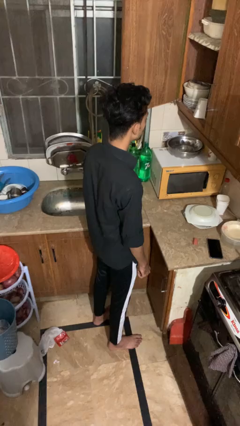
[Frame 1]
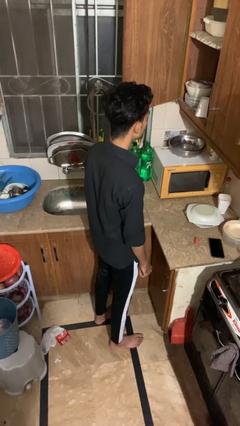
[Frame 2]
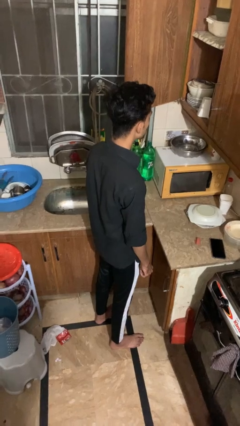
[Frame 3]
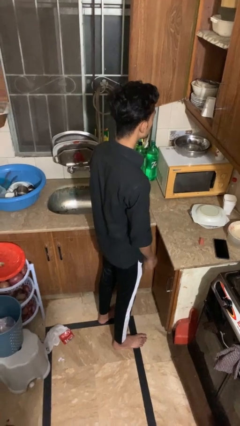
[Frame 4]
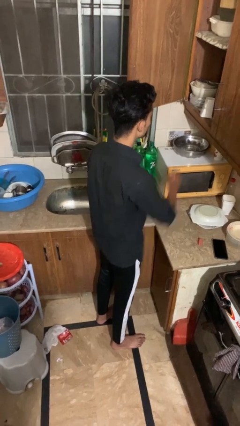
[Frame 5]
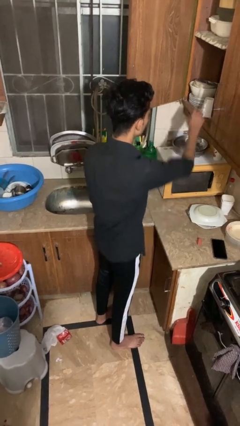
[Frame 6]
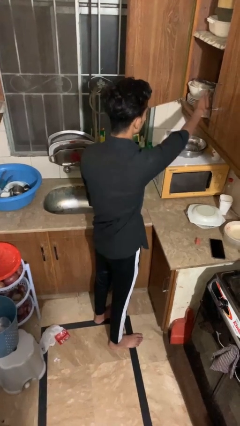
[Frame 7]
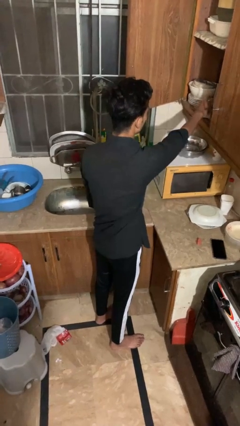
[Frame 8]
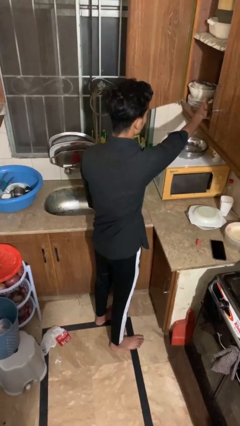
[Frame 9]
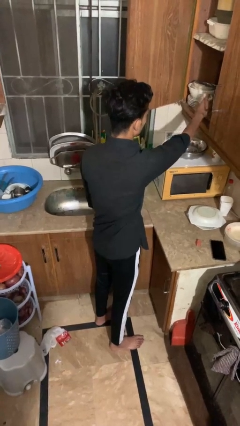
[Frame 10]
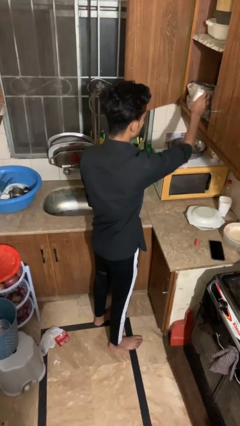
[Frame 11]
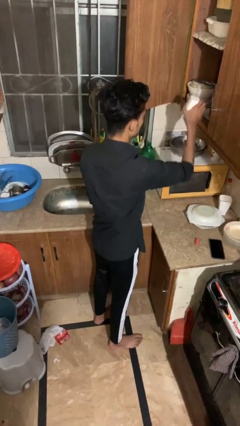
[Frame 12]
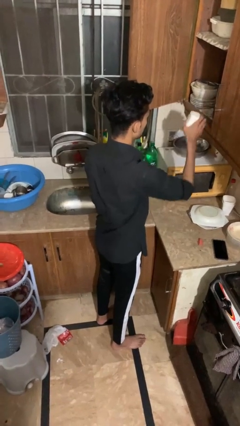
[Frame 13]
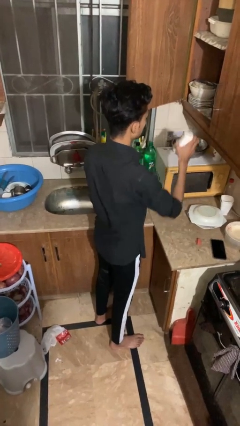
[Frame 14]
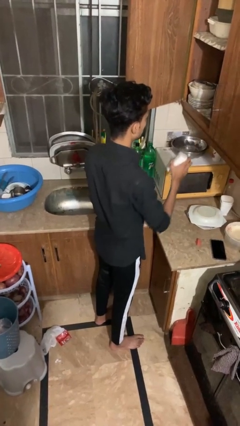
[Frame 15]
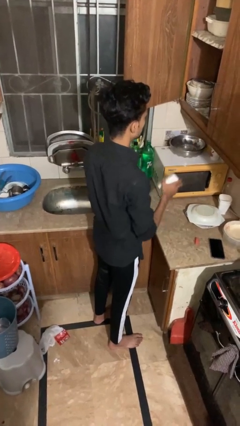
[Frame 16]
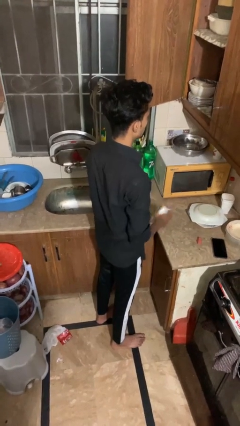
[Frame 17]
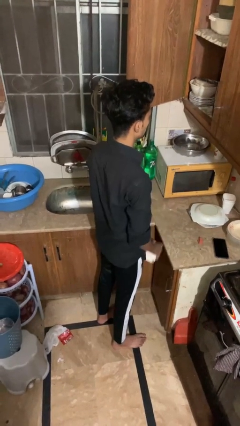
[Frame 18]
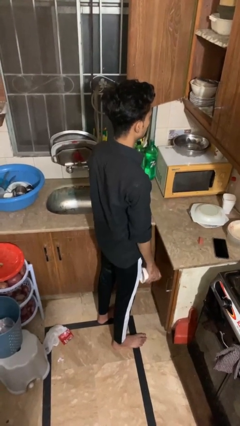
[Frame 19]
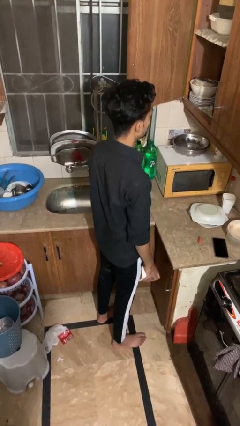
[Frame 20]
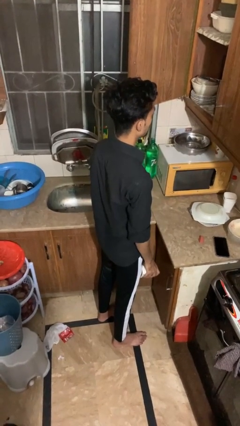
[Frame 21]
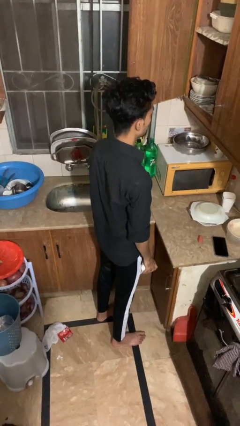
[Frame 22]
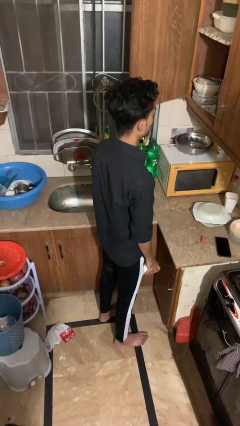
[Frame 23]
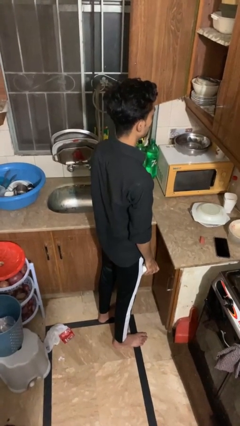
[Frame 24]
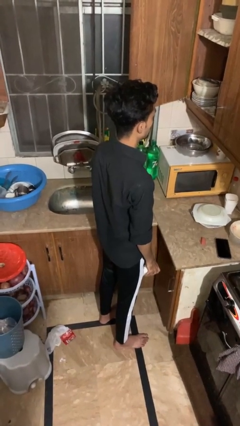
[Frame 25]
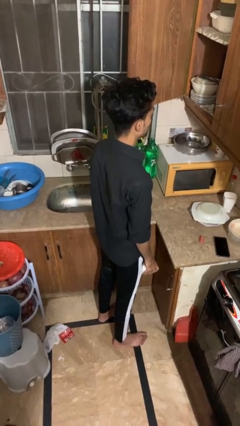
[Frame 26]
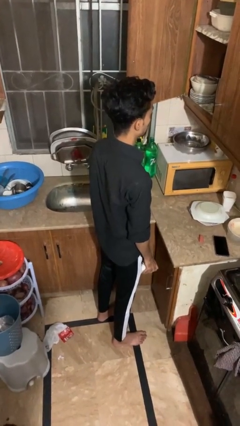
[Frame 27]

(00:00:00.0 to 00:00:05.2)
person picks up object from cabinet

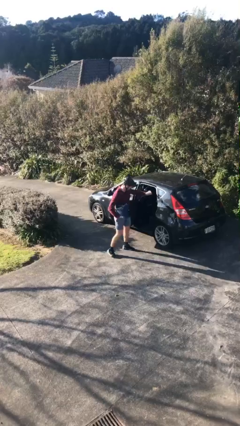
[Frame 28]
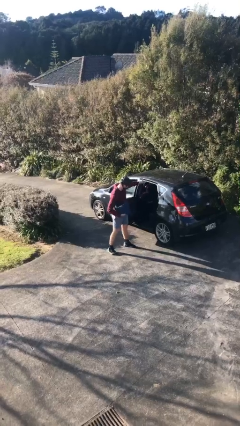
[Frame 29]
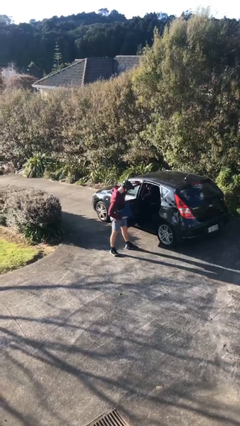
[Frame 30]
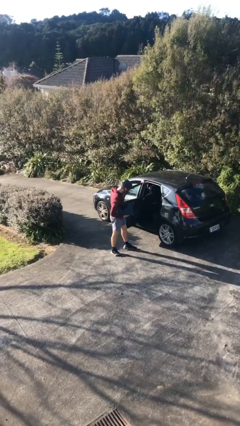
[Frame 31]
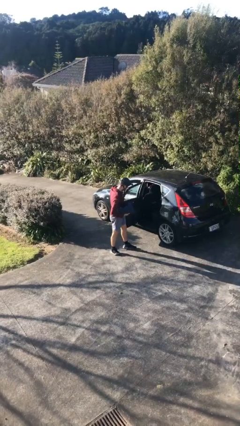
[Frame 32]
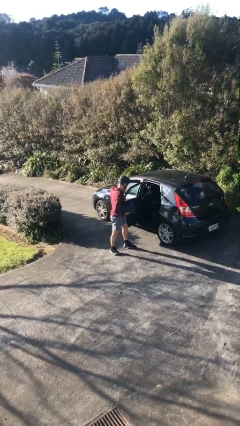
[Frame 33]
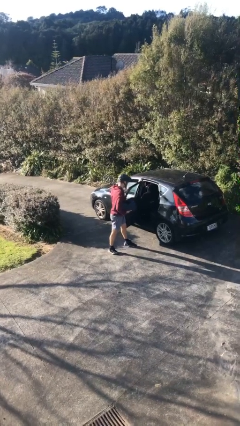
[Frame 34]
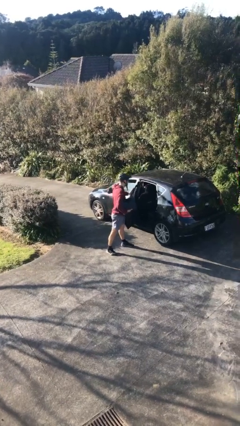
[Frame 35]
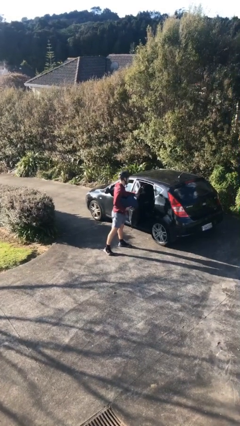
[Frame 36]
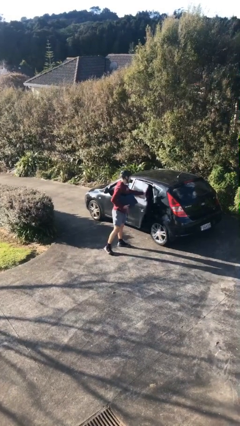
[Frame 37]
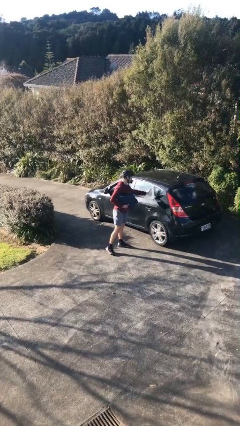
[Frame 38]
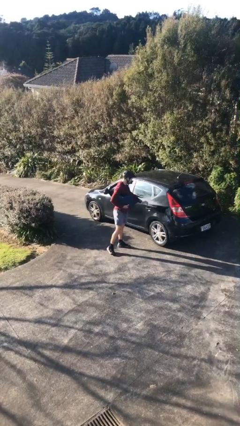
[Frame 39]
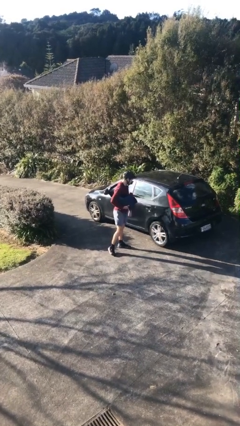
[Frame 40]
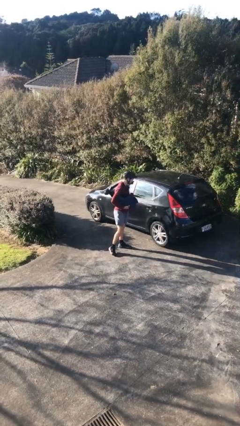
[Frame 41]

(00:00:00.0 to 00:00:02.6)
person closes car door

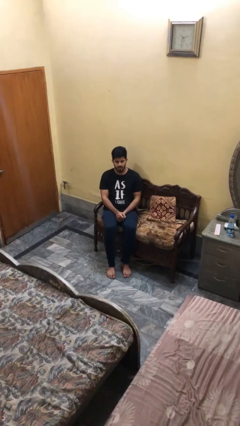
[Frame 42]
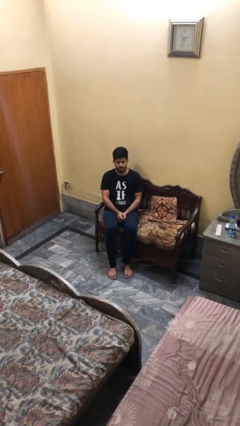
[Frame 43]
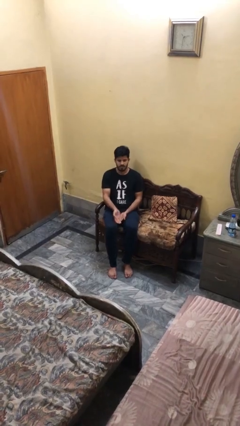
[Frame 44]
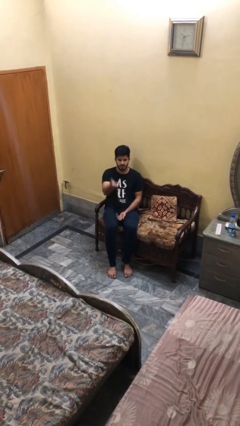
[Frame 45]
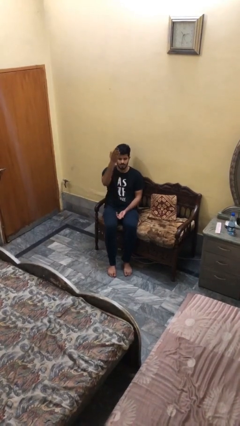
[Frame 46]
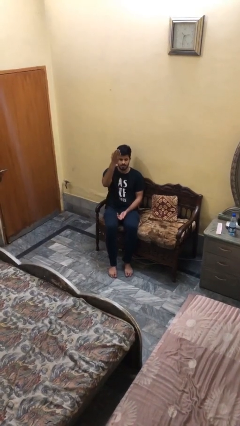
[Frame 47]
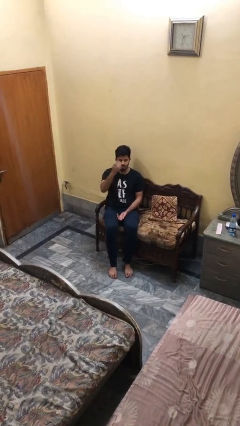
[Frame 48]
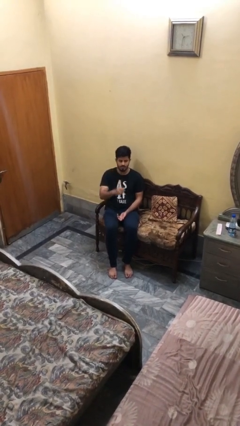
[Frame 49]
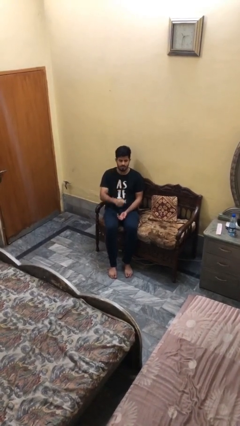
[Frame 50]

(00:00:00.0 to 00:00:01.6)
person gestures swipe up

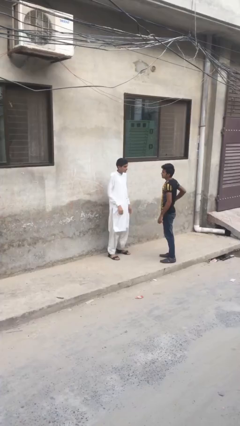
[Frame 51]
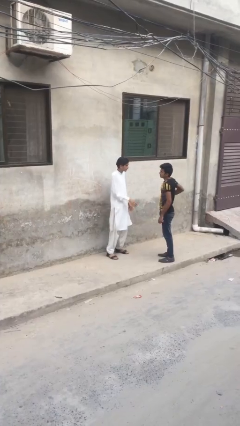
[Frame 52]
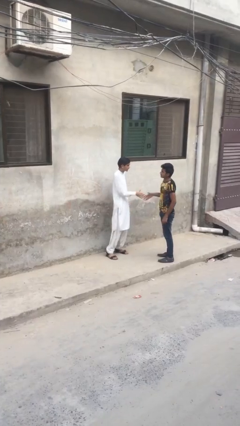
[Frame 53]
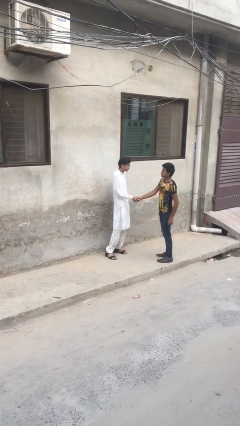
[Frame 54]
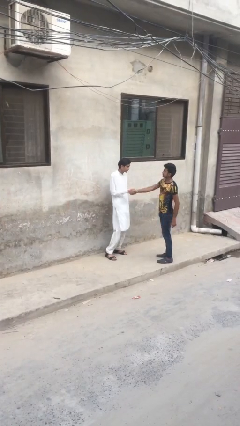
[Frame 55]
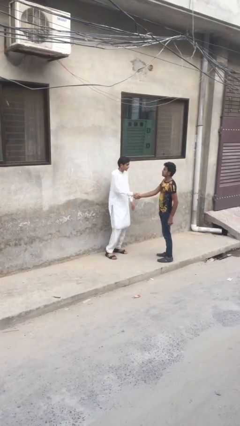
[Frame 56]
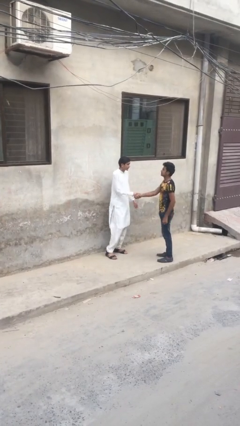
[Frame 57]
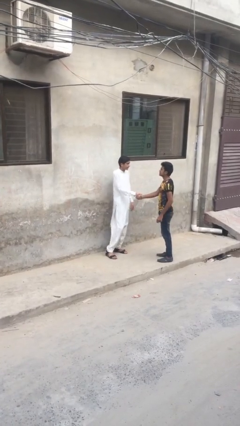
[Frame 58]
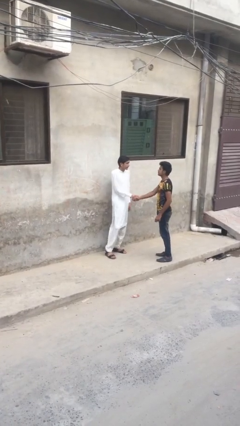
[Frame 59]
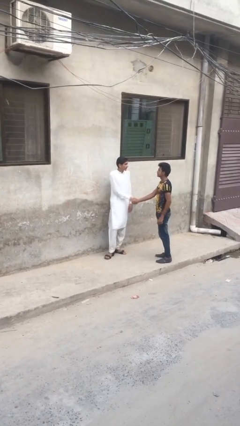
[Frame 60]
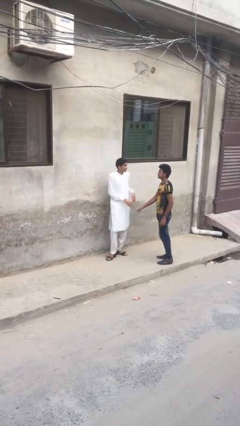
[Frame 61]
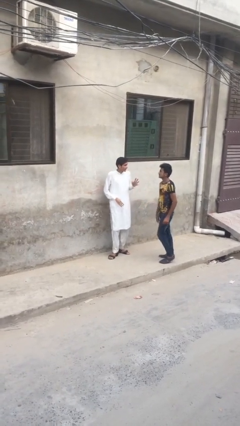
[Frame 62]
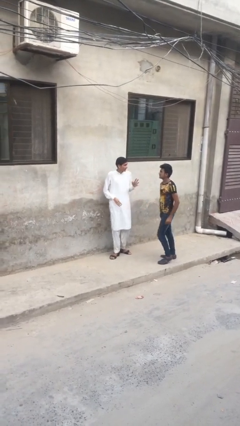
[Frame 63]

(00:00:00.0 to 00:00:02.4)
person shakes hand

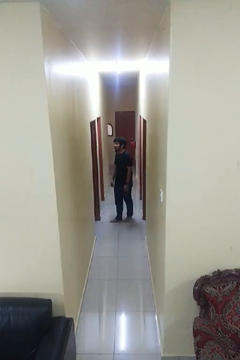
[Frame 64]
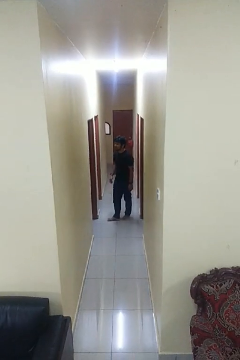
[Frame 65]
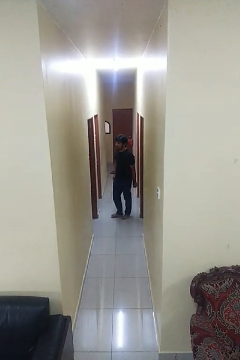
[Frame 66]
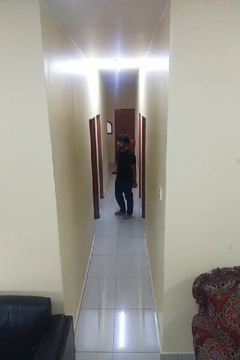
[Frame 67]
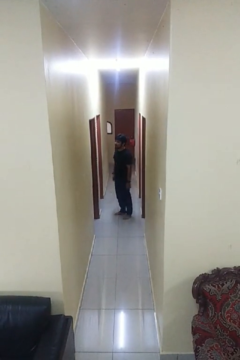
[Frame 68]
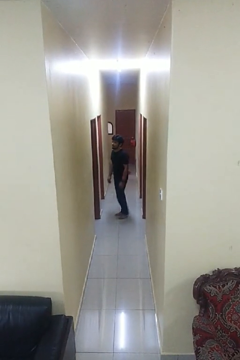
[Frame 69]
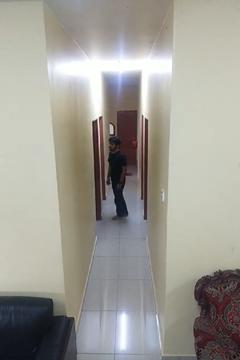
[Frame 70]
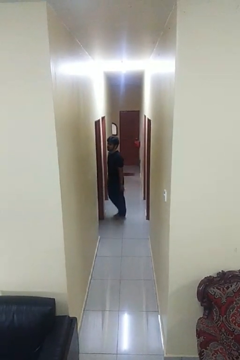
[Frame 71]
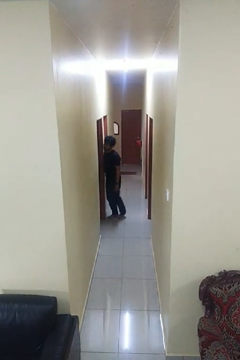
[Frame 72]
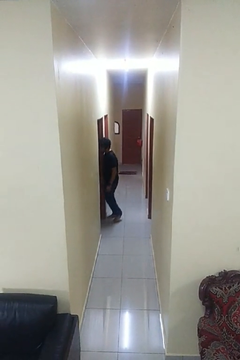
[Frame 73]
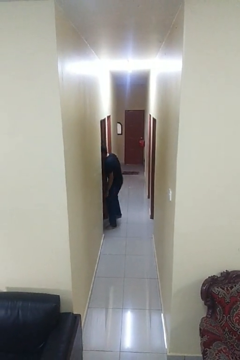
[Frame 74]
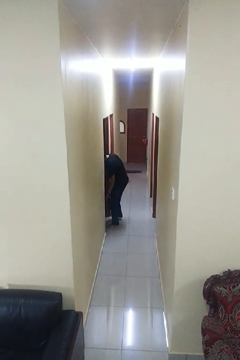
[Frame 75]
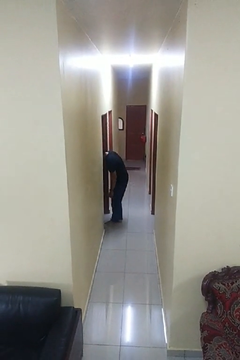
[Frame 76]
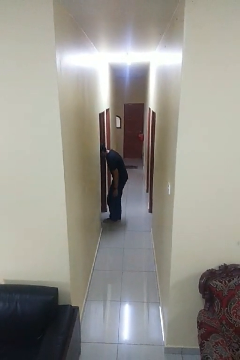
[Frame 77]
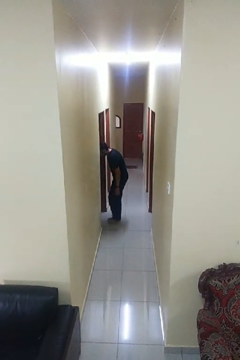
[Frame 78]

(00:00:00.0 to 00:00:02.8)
person bumps into wall

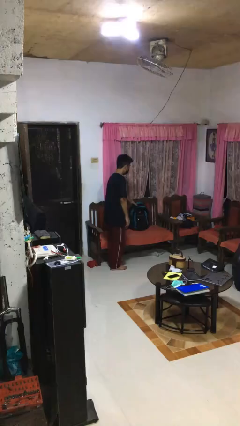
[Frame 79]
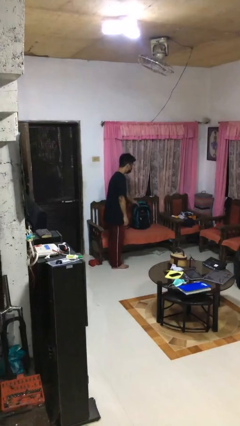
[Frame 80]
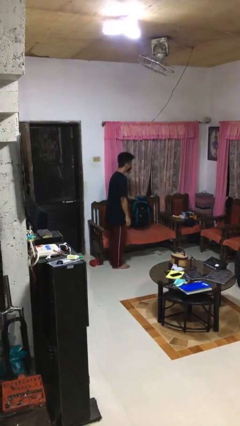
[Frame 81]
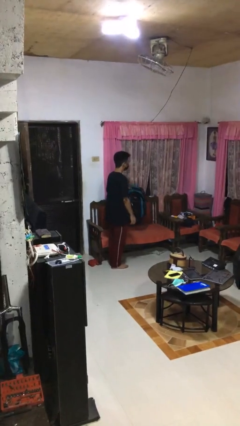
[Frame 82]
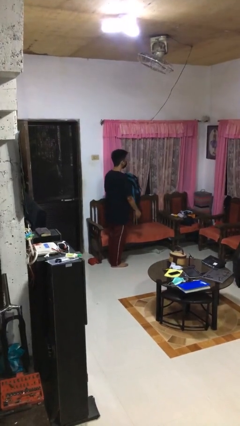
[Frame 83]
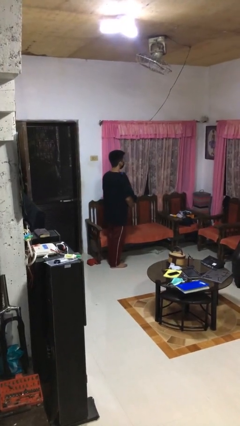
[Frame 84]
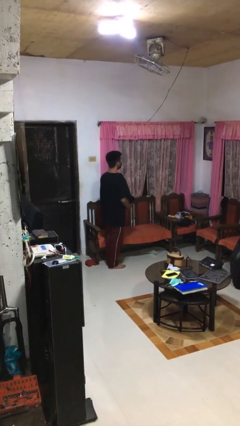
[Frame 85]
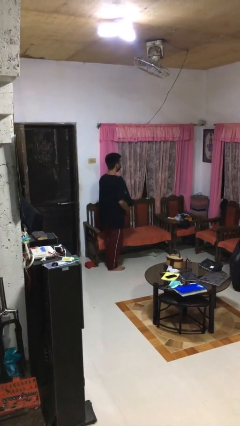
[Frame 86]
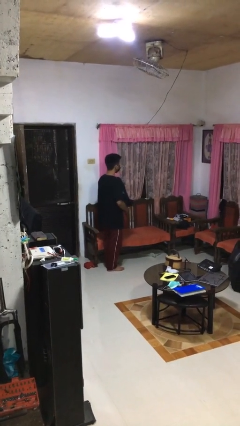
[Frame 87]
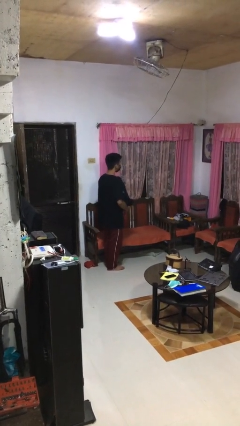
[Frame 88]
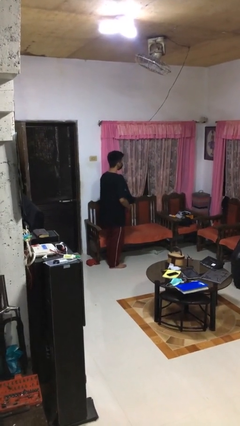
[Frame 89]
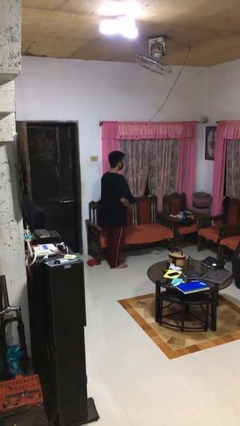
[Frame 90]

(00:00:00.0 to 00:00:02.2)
person picks up object from couch
